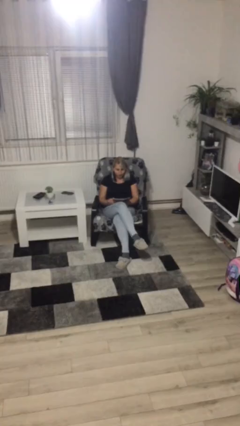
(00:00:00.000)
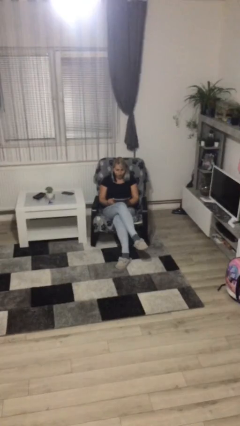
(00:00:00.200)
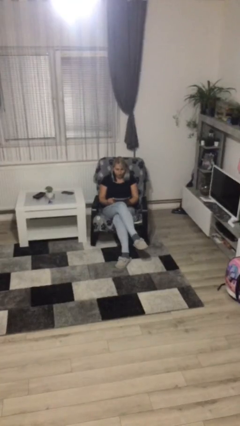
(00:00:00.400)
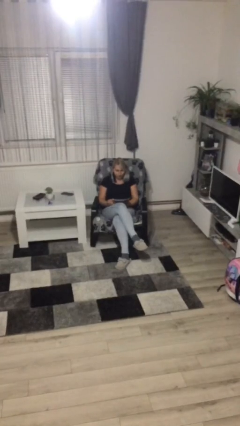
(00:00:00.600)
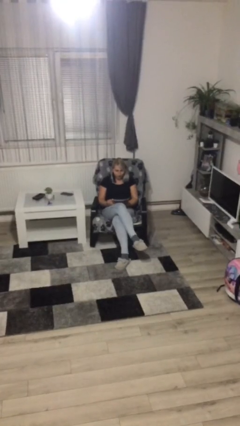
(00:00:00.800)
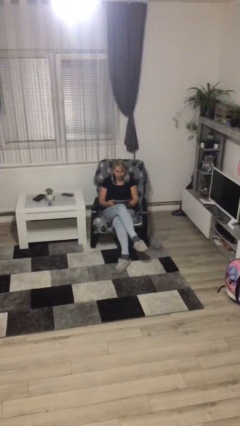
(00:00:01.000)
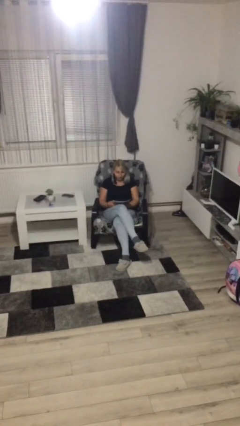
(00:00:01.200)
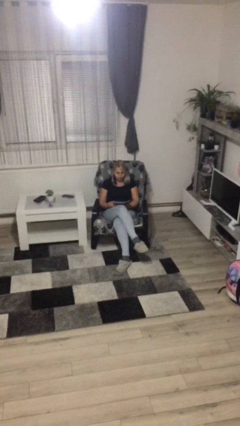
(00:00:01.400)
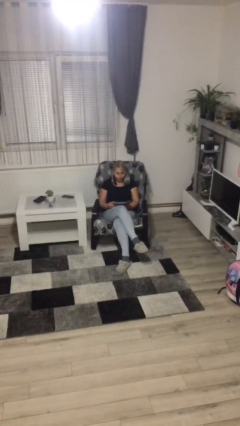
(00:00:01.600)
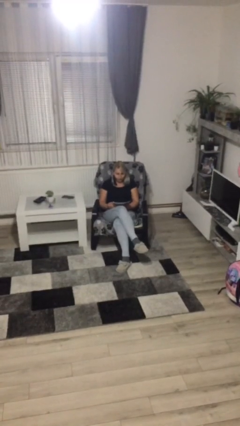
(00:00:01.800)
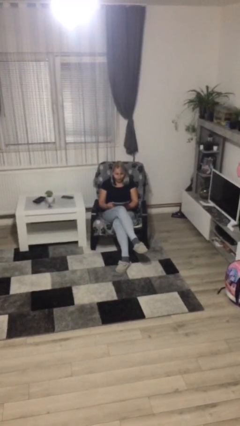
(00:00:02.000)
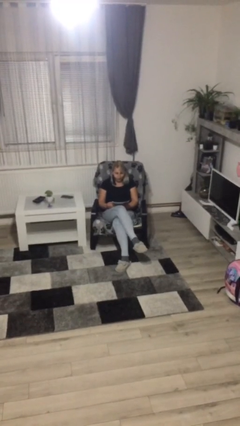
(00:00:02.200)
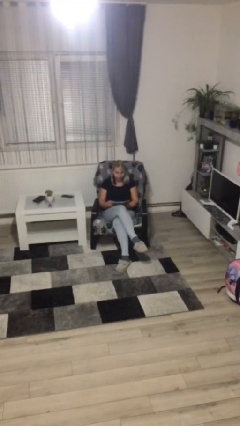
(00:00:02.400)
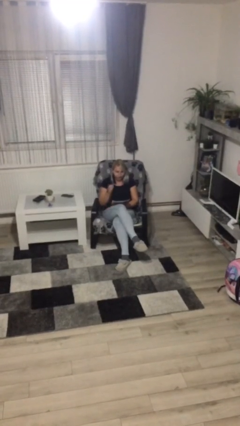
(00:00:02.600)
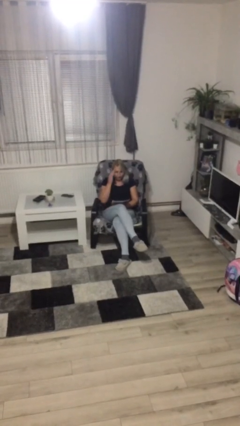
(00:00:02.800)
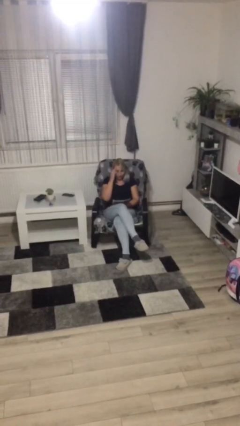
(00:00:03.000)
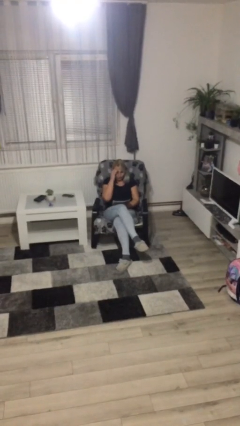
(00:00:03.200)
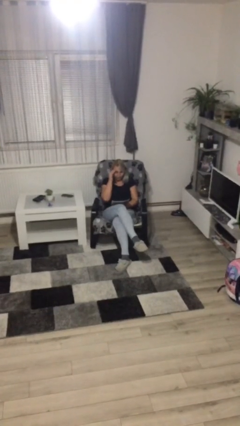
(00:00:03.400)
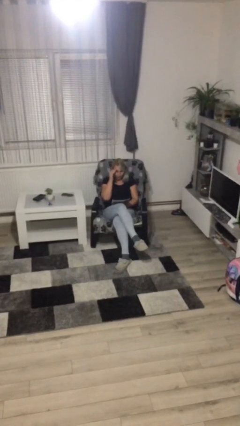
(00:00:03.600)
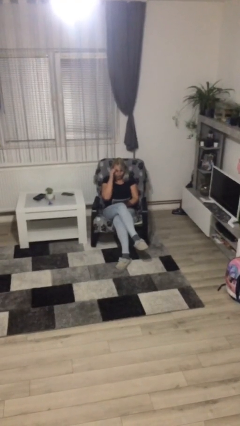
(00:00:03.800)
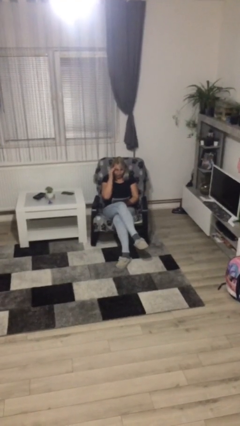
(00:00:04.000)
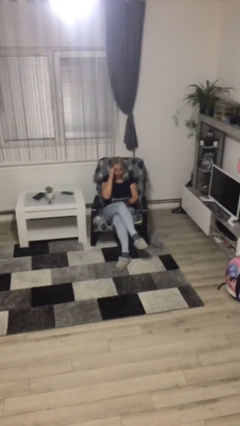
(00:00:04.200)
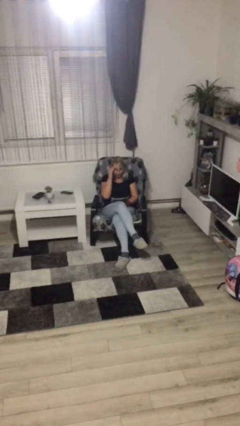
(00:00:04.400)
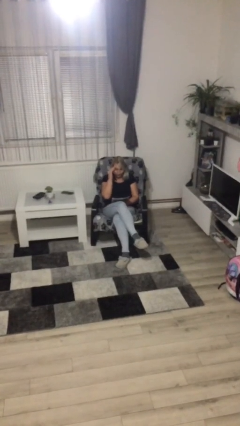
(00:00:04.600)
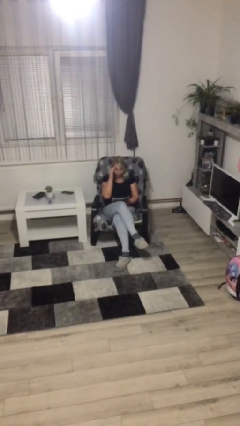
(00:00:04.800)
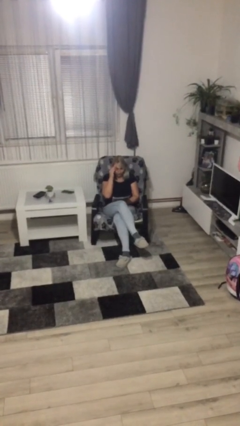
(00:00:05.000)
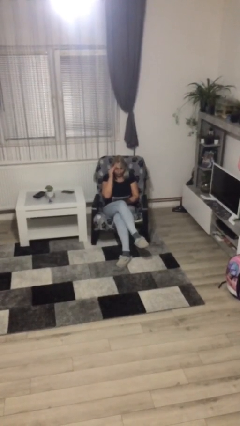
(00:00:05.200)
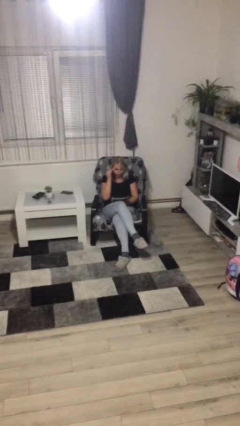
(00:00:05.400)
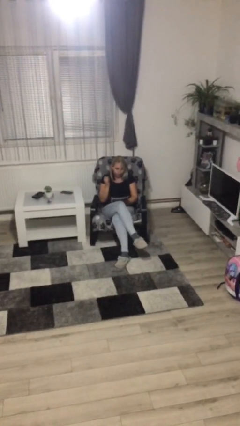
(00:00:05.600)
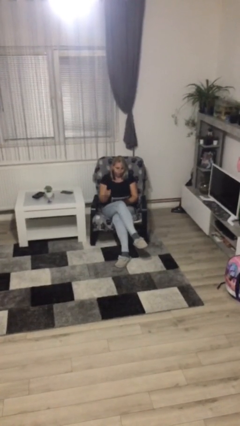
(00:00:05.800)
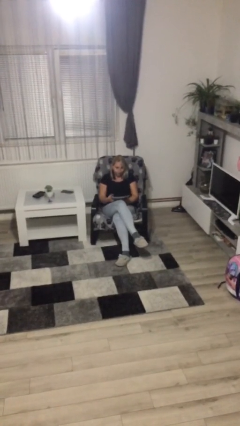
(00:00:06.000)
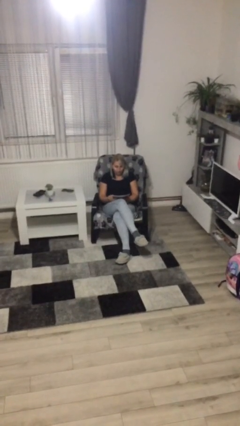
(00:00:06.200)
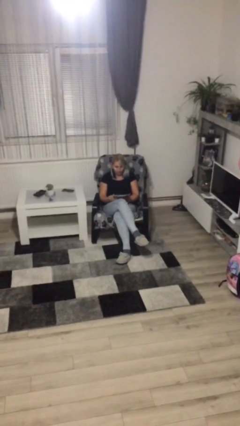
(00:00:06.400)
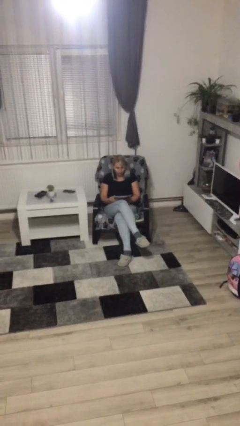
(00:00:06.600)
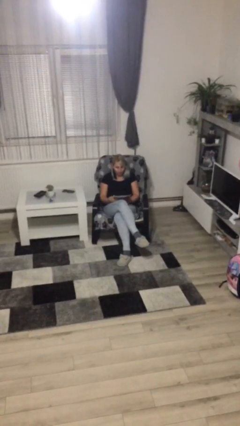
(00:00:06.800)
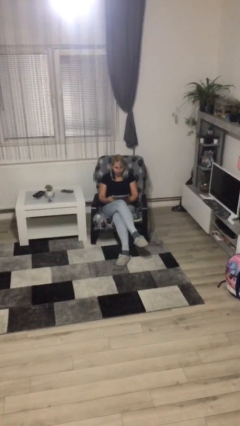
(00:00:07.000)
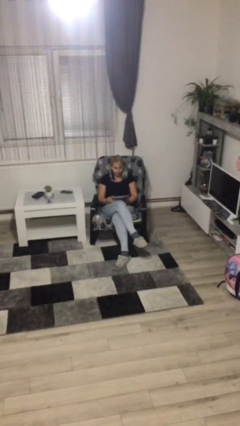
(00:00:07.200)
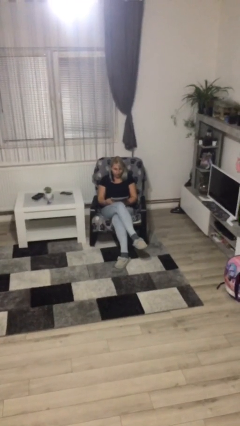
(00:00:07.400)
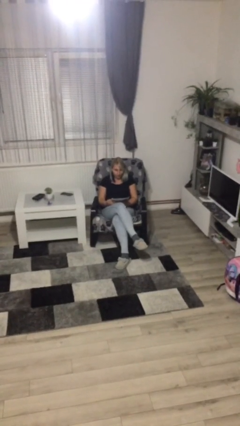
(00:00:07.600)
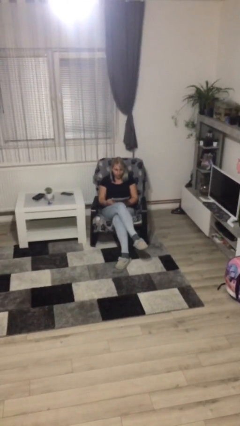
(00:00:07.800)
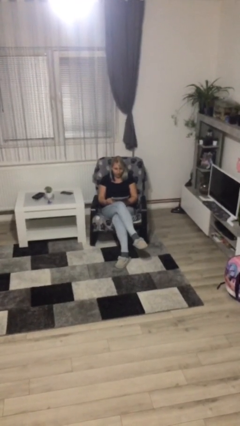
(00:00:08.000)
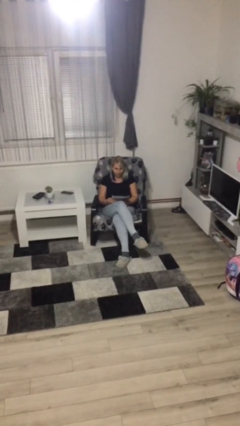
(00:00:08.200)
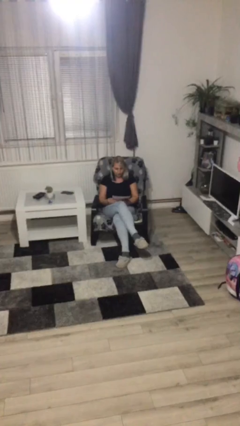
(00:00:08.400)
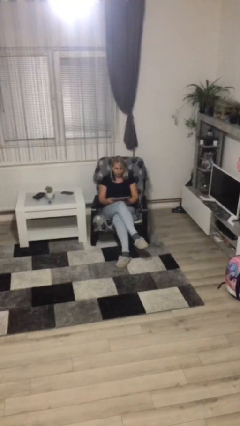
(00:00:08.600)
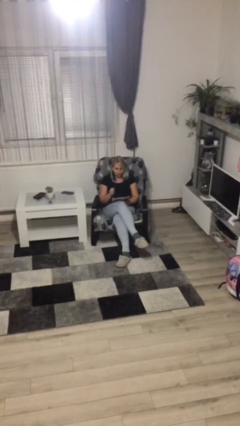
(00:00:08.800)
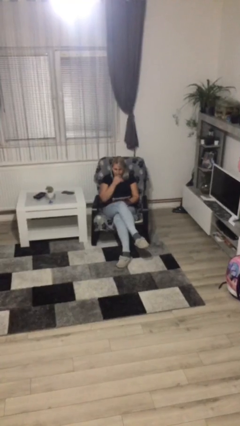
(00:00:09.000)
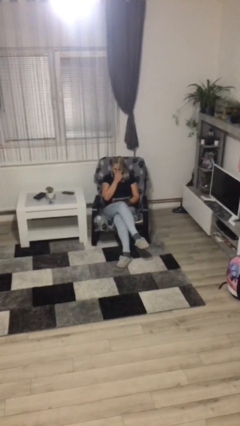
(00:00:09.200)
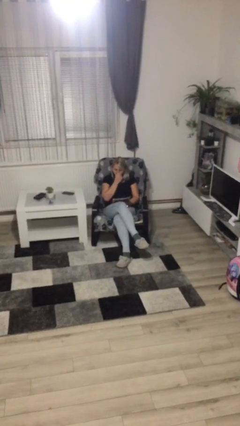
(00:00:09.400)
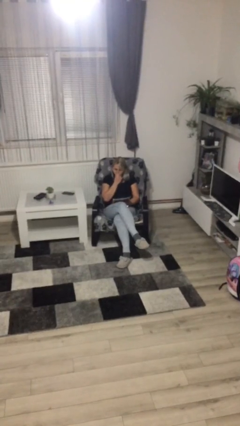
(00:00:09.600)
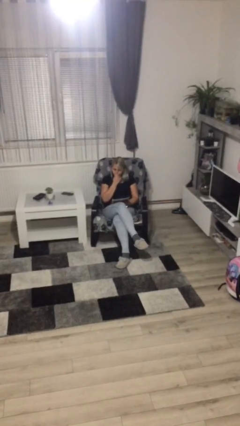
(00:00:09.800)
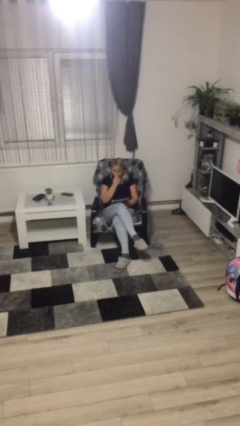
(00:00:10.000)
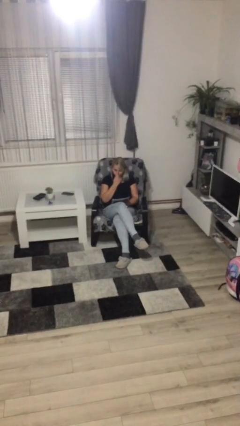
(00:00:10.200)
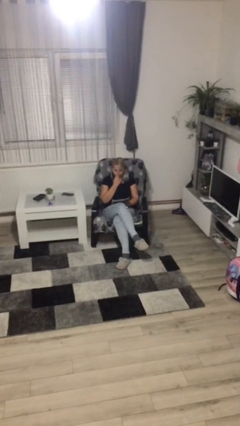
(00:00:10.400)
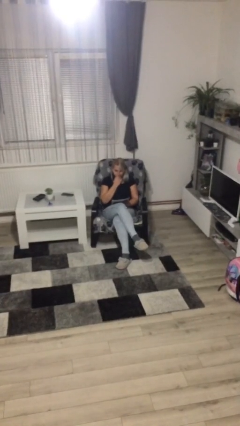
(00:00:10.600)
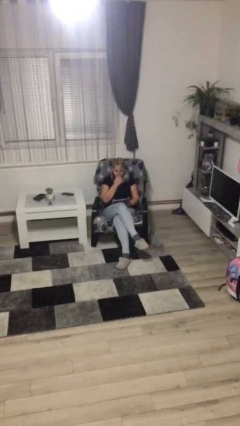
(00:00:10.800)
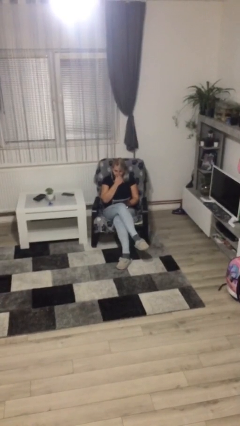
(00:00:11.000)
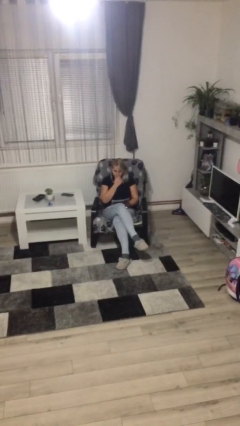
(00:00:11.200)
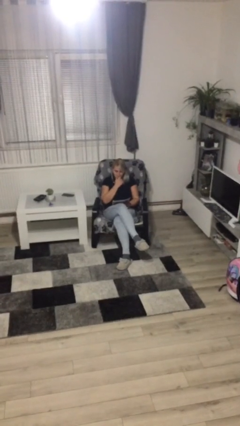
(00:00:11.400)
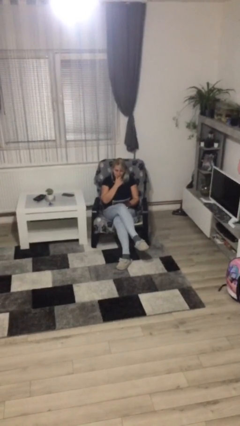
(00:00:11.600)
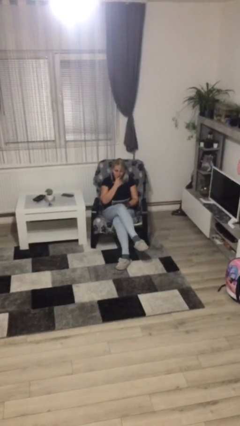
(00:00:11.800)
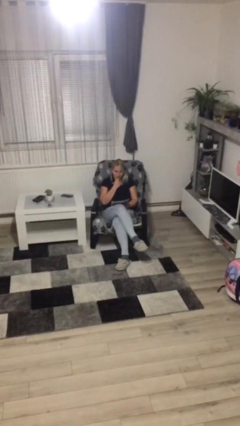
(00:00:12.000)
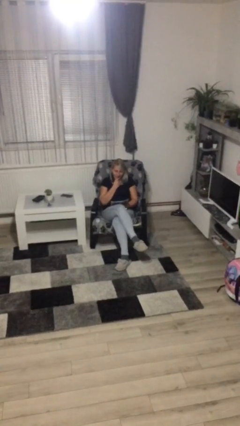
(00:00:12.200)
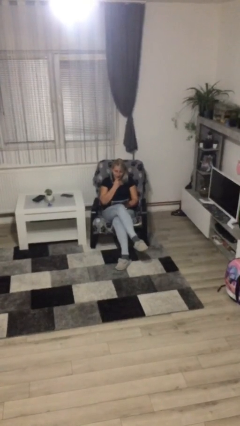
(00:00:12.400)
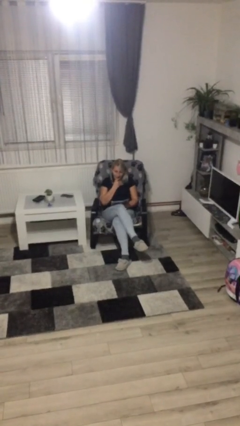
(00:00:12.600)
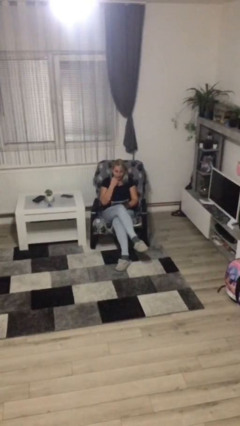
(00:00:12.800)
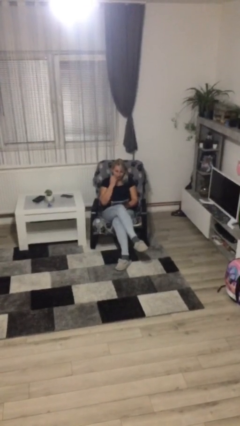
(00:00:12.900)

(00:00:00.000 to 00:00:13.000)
person reads document

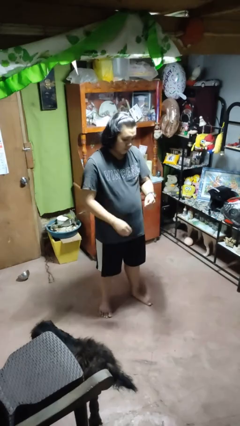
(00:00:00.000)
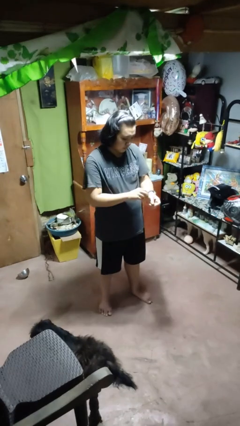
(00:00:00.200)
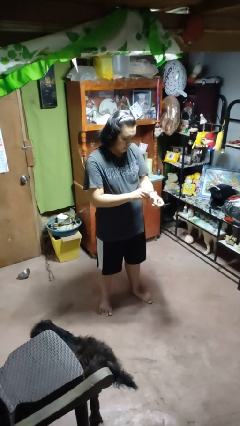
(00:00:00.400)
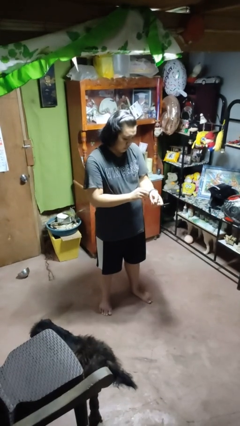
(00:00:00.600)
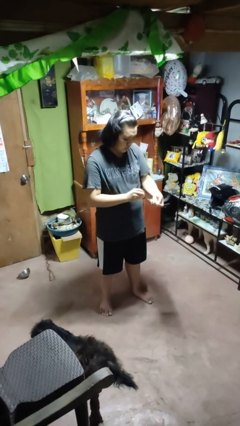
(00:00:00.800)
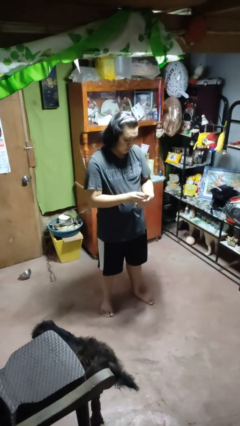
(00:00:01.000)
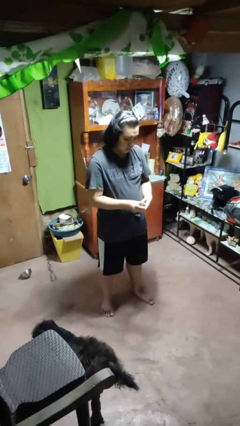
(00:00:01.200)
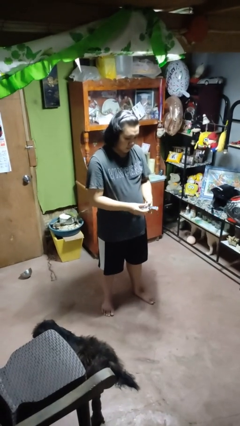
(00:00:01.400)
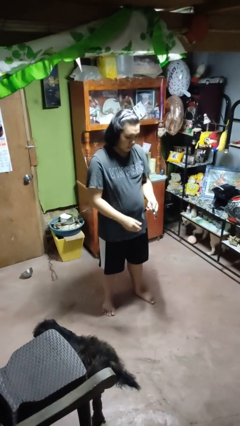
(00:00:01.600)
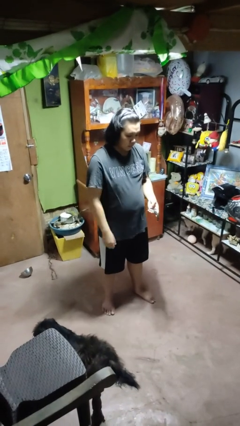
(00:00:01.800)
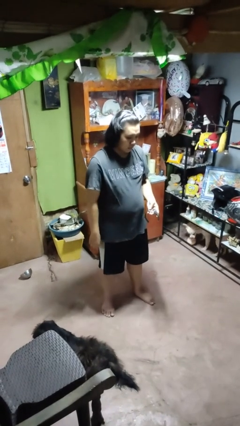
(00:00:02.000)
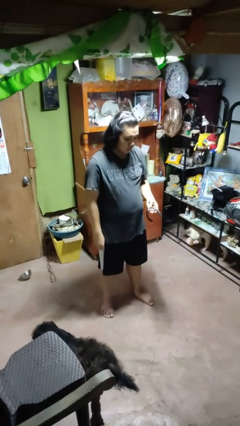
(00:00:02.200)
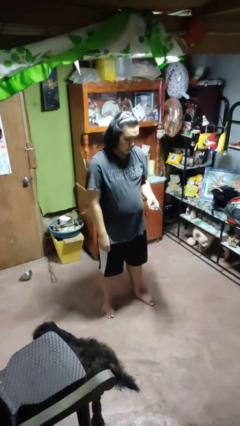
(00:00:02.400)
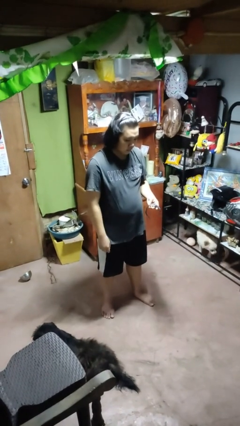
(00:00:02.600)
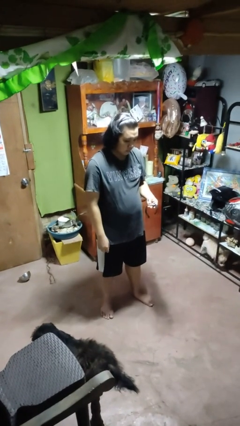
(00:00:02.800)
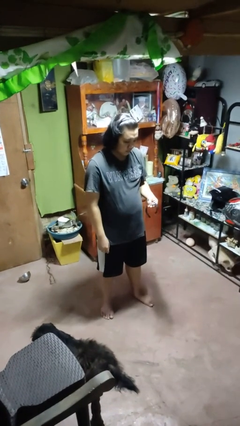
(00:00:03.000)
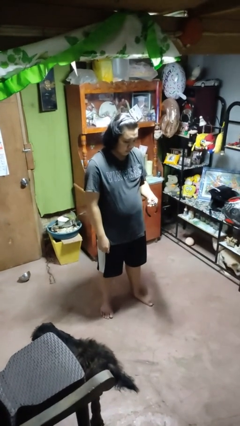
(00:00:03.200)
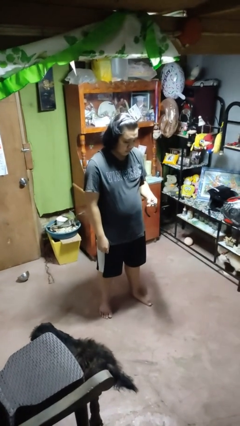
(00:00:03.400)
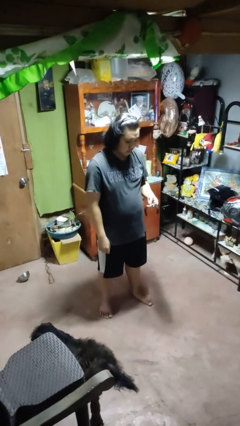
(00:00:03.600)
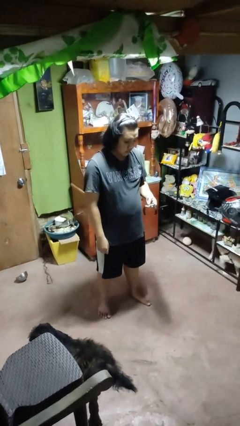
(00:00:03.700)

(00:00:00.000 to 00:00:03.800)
person takes off wristwatch

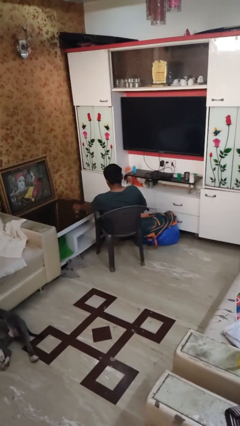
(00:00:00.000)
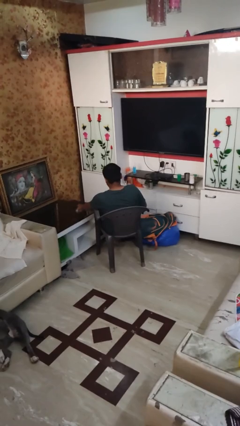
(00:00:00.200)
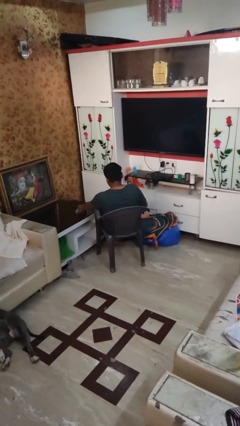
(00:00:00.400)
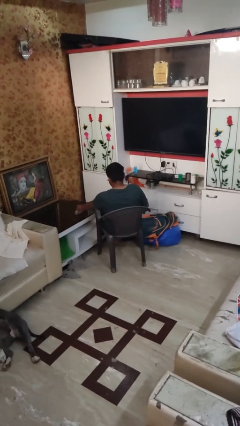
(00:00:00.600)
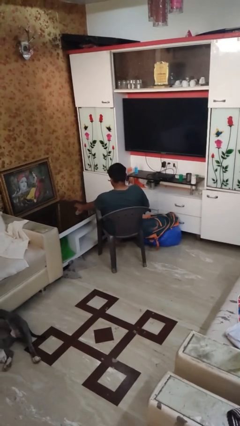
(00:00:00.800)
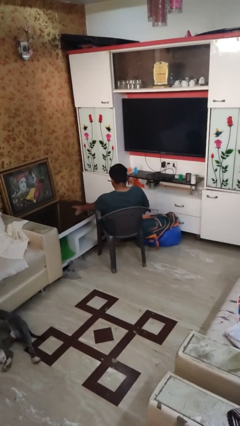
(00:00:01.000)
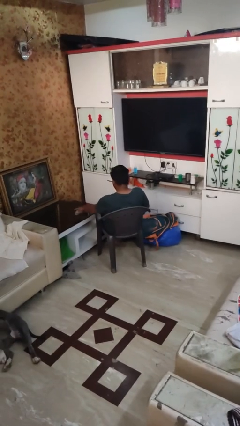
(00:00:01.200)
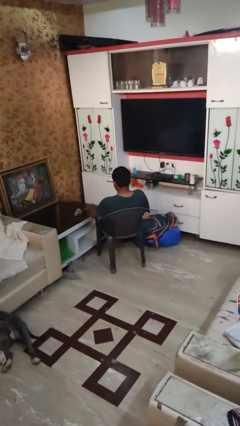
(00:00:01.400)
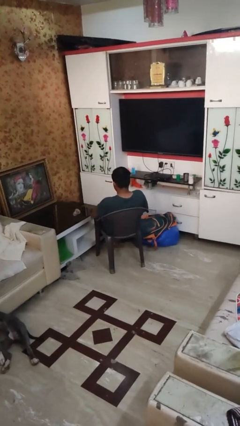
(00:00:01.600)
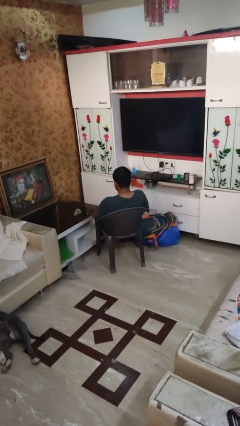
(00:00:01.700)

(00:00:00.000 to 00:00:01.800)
person spills on table
